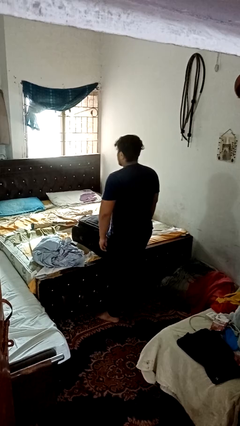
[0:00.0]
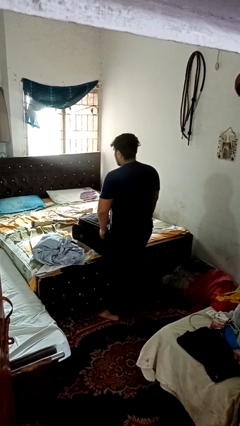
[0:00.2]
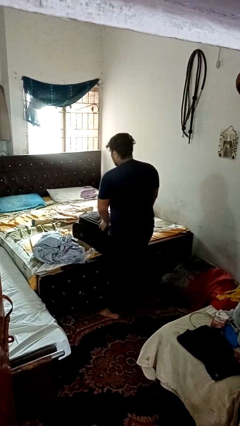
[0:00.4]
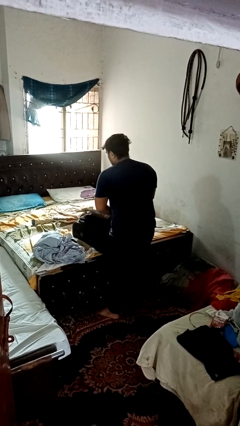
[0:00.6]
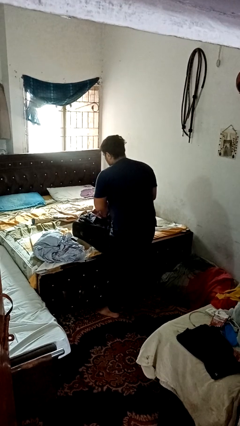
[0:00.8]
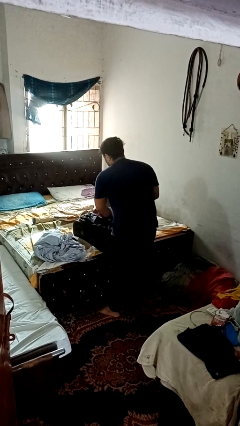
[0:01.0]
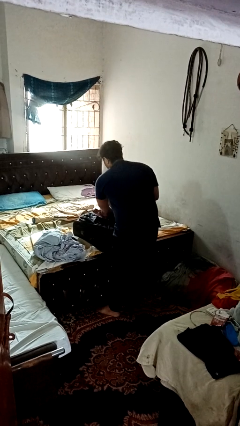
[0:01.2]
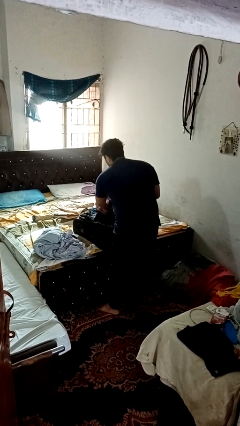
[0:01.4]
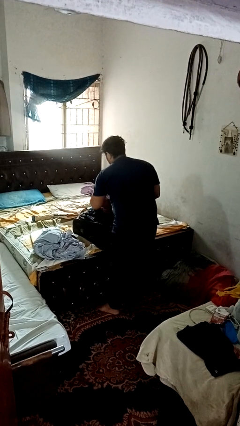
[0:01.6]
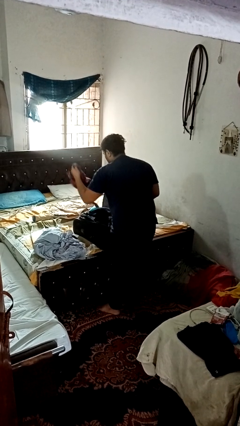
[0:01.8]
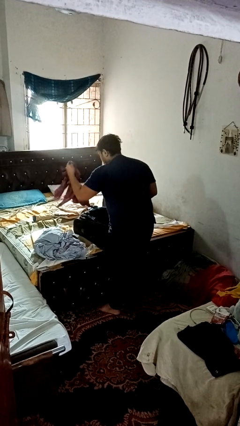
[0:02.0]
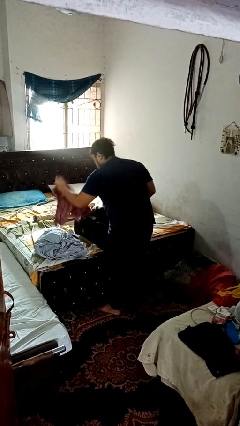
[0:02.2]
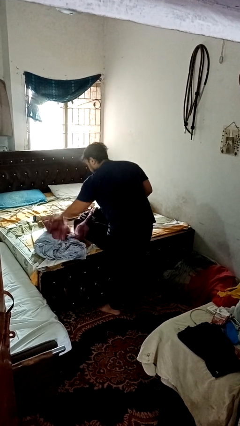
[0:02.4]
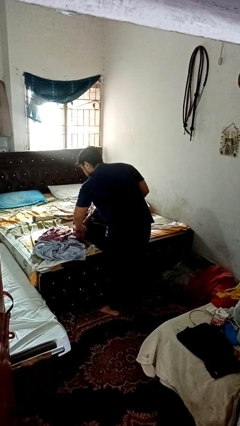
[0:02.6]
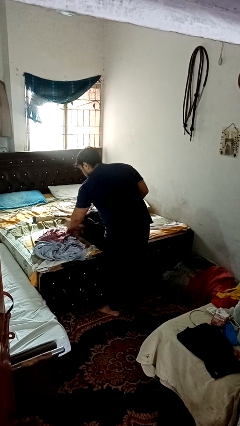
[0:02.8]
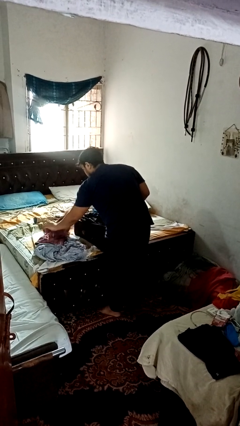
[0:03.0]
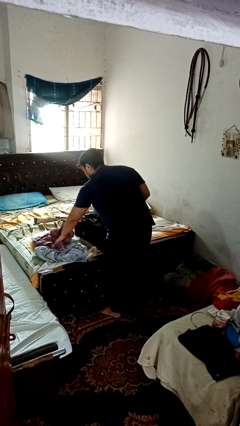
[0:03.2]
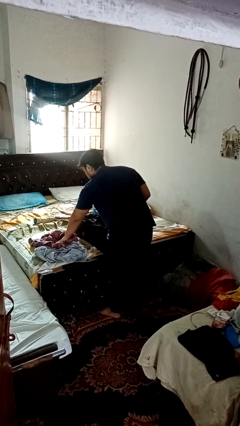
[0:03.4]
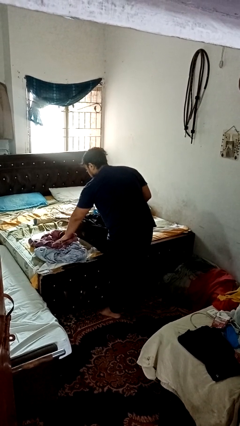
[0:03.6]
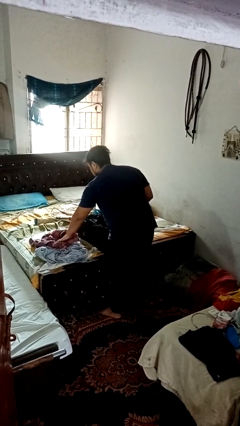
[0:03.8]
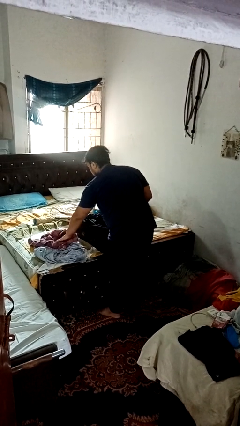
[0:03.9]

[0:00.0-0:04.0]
person unloads clothes from suitcase

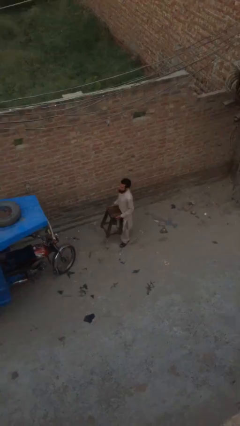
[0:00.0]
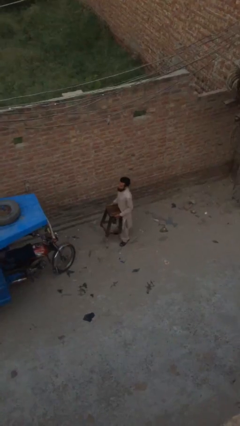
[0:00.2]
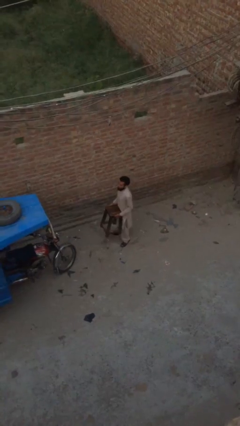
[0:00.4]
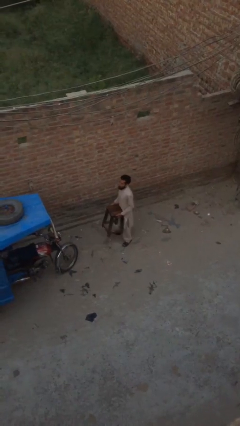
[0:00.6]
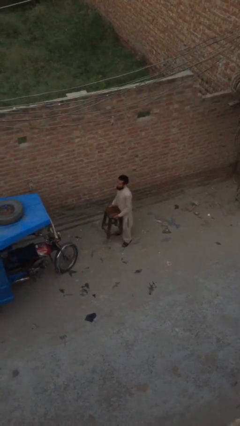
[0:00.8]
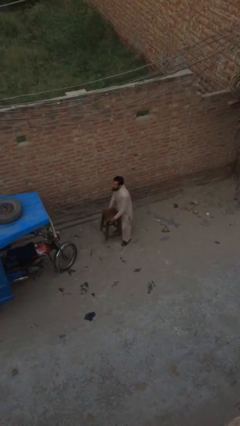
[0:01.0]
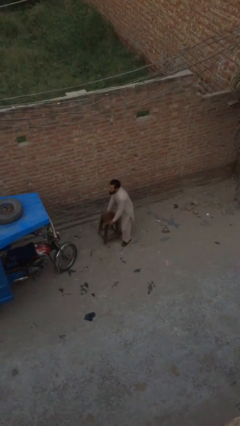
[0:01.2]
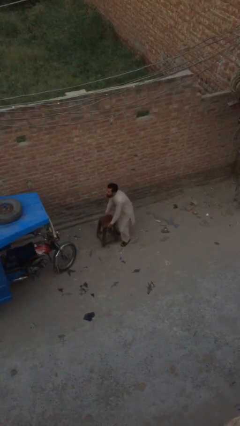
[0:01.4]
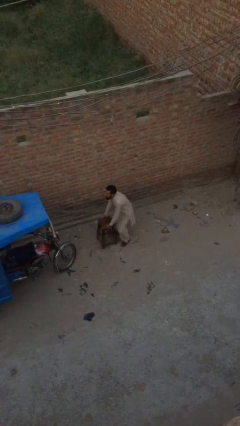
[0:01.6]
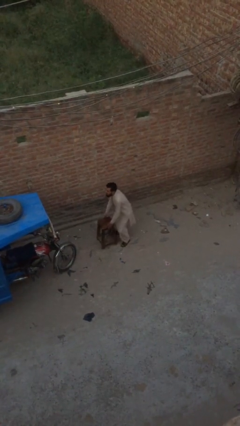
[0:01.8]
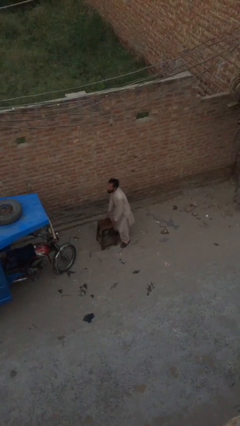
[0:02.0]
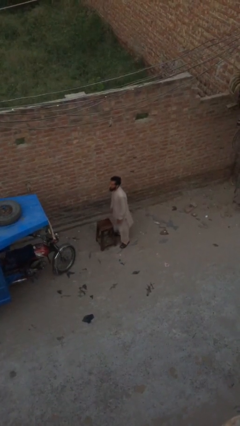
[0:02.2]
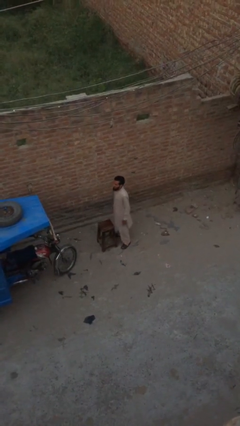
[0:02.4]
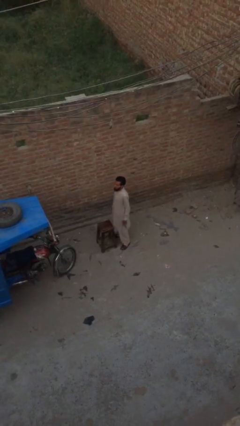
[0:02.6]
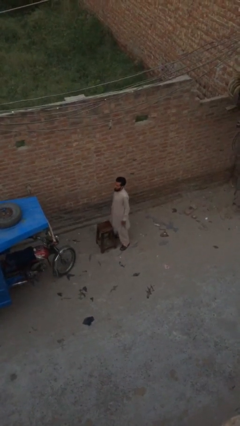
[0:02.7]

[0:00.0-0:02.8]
person puts down object on floor

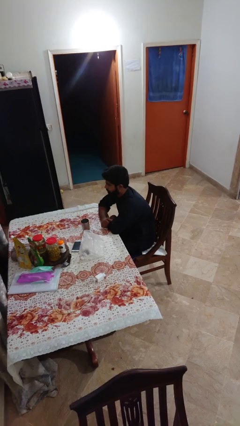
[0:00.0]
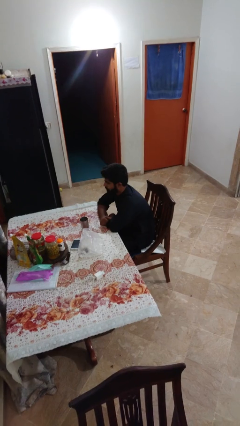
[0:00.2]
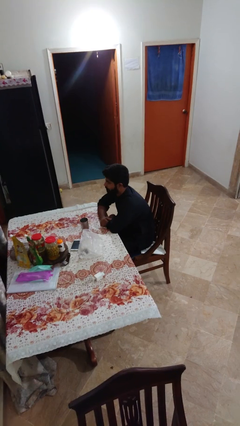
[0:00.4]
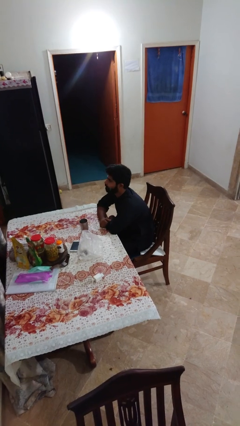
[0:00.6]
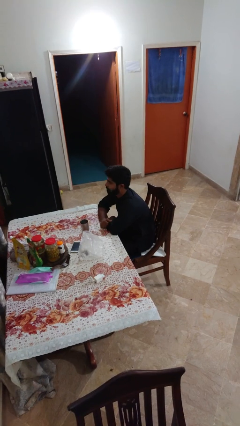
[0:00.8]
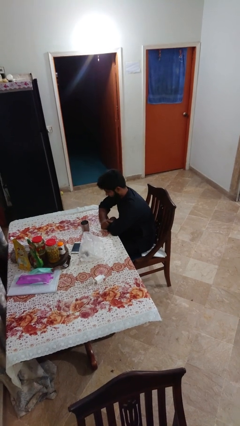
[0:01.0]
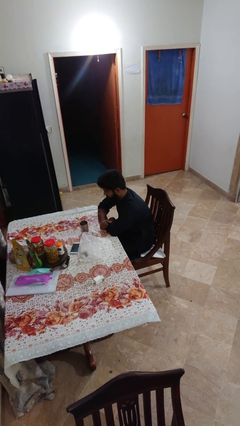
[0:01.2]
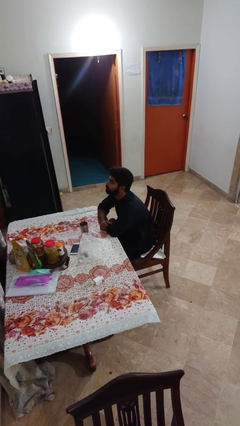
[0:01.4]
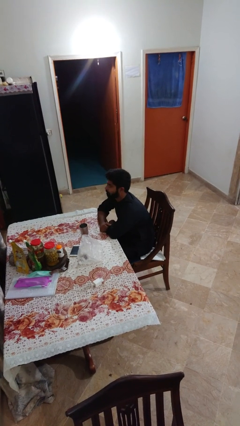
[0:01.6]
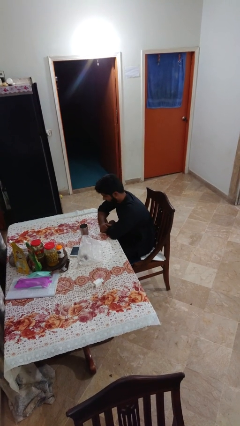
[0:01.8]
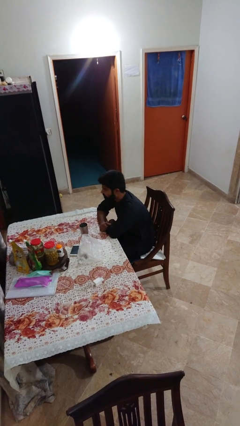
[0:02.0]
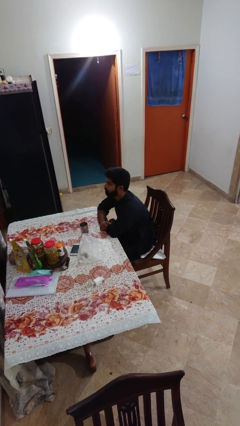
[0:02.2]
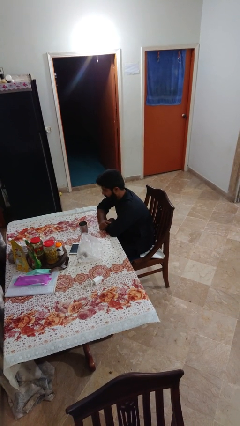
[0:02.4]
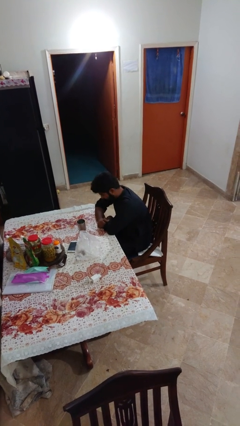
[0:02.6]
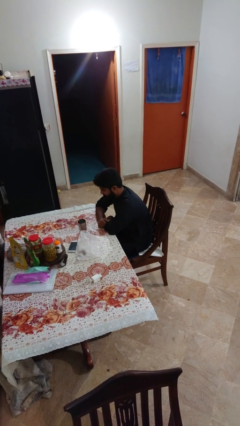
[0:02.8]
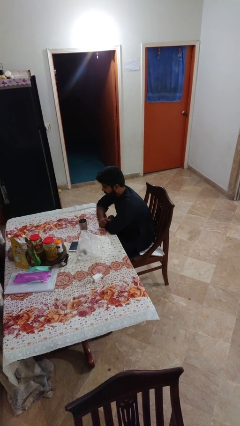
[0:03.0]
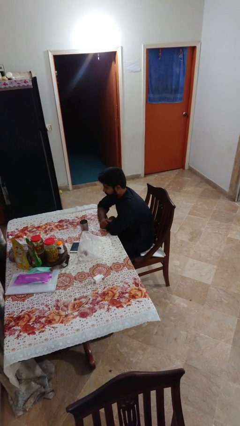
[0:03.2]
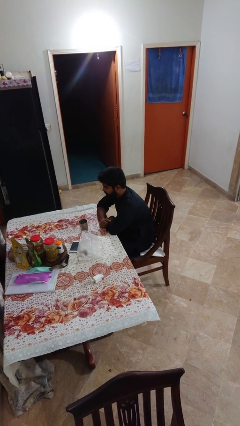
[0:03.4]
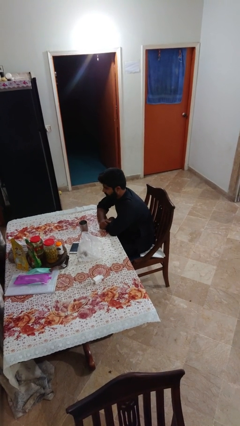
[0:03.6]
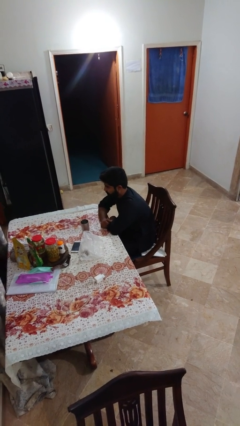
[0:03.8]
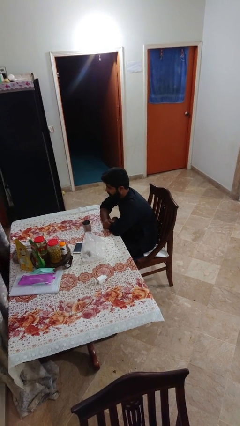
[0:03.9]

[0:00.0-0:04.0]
person nods head

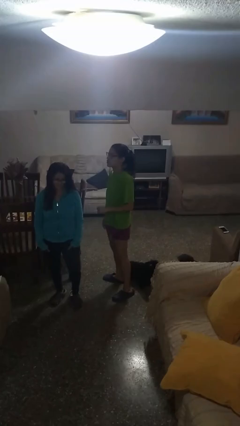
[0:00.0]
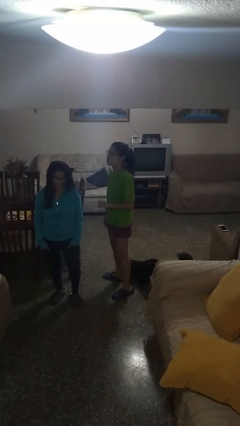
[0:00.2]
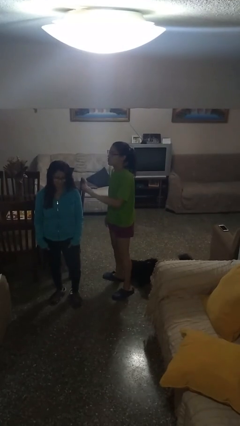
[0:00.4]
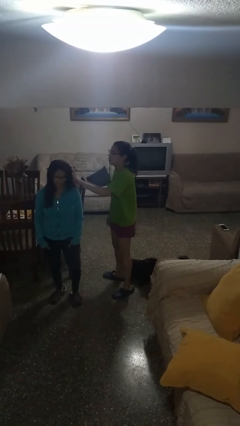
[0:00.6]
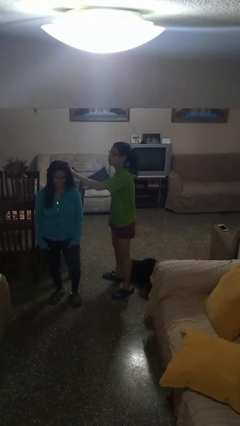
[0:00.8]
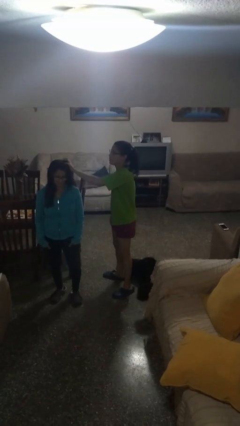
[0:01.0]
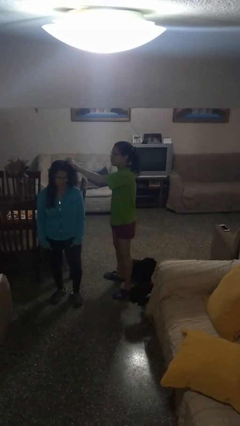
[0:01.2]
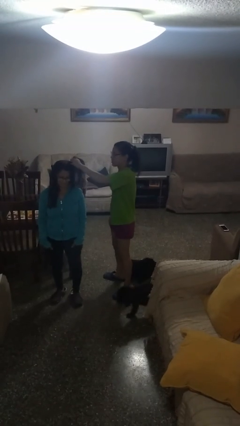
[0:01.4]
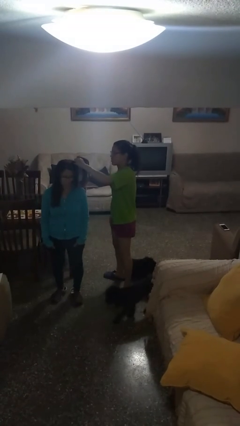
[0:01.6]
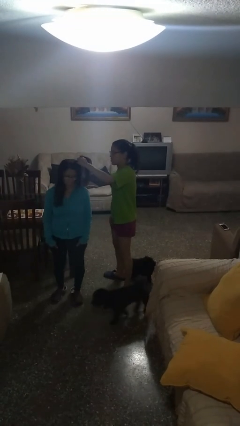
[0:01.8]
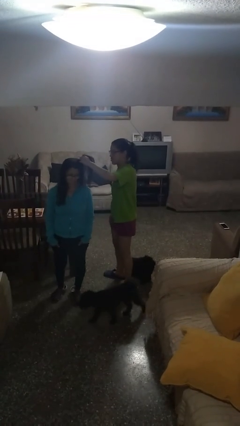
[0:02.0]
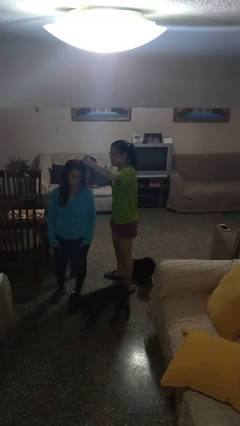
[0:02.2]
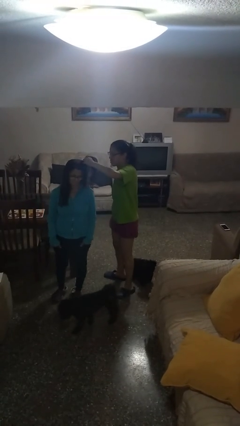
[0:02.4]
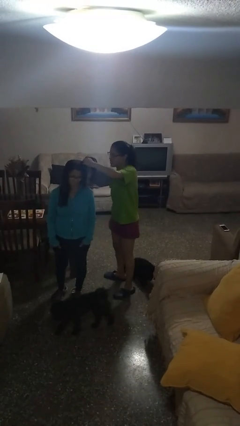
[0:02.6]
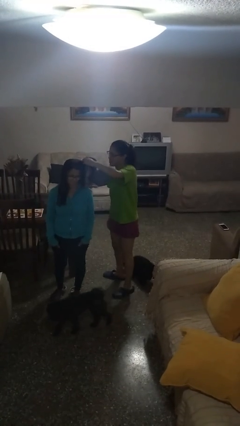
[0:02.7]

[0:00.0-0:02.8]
person grabs person by hair

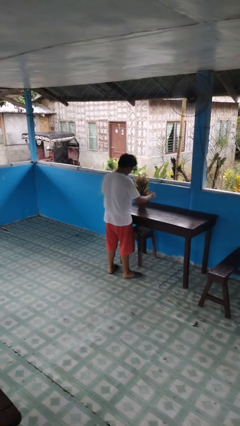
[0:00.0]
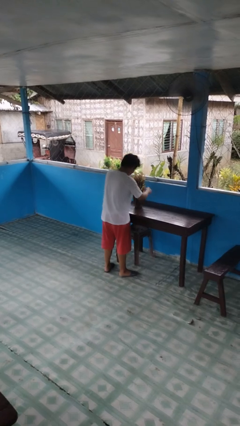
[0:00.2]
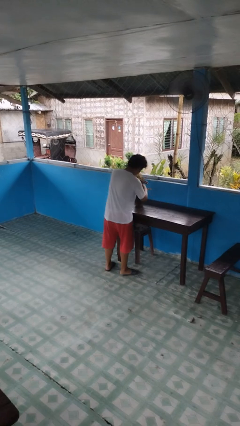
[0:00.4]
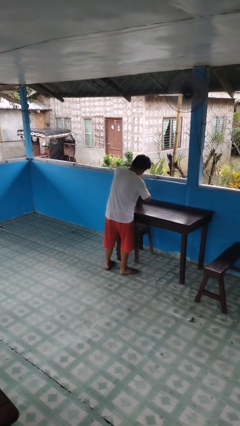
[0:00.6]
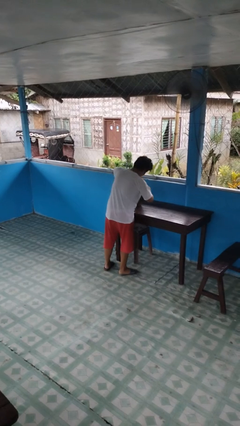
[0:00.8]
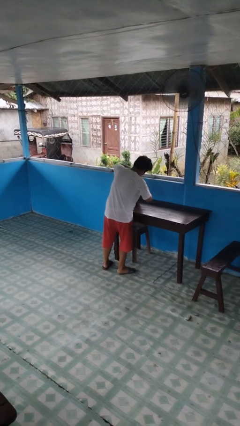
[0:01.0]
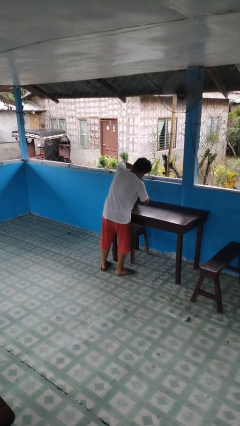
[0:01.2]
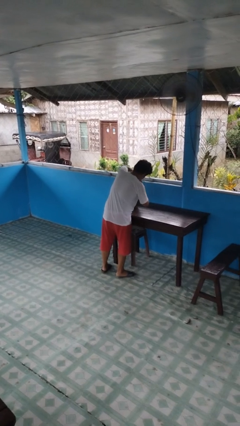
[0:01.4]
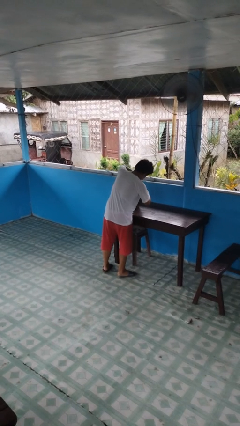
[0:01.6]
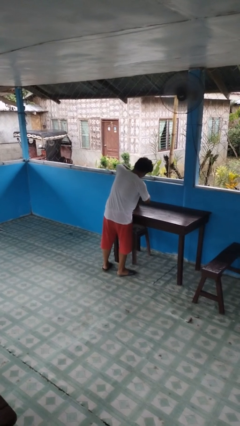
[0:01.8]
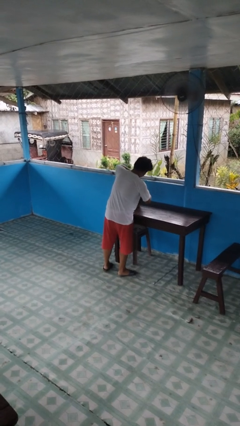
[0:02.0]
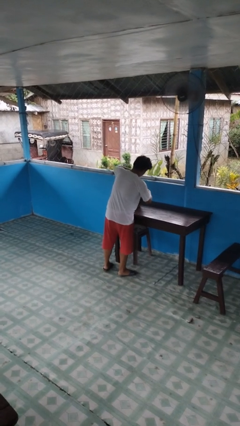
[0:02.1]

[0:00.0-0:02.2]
person arranges flowers in vase

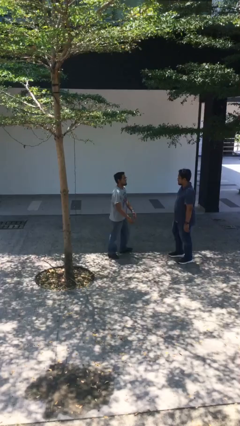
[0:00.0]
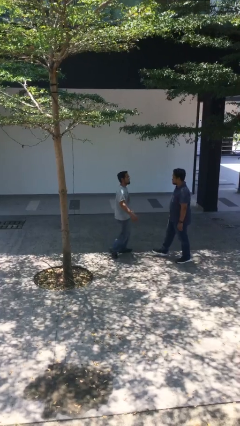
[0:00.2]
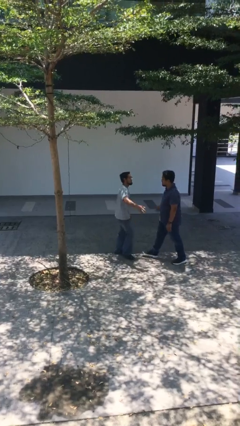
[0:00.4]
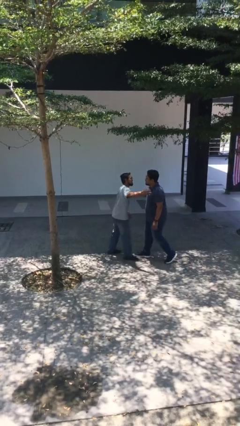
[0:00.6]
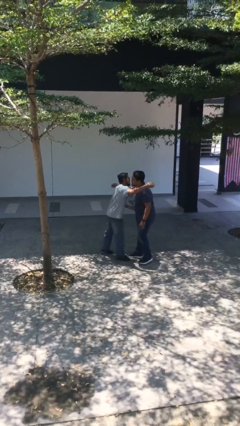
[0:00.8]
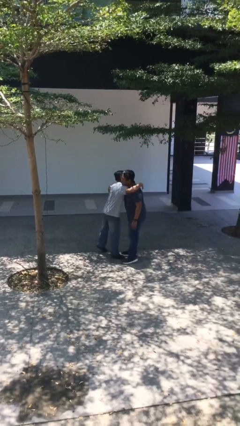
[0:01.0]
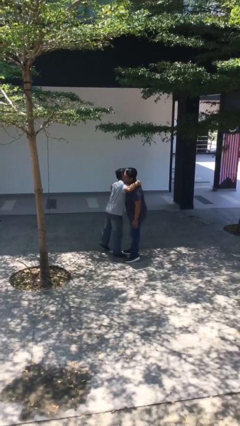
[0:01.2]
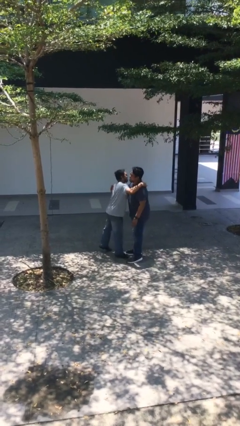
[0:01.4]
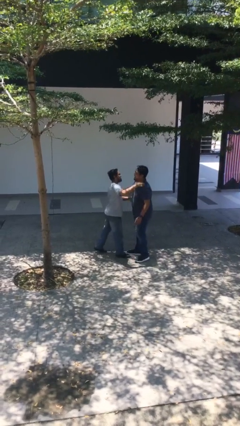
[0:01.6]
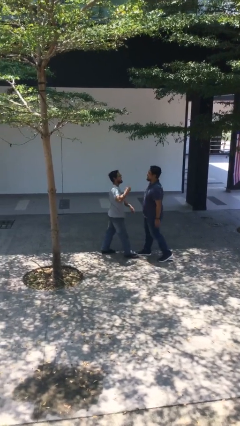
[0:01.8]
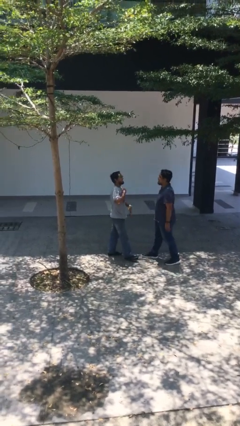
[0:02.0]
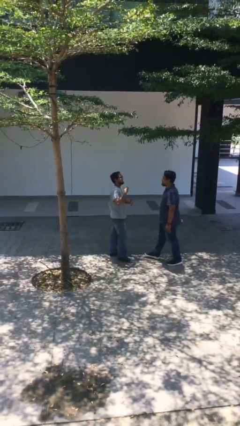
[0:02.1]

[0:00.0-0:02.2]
person embraces person
